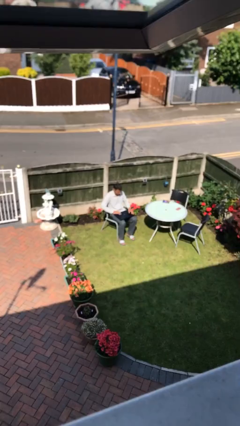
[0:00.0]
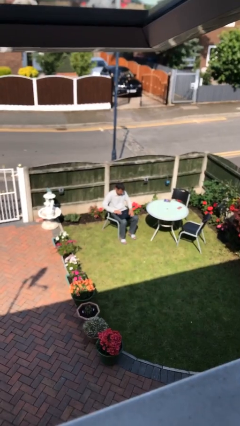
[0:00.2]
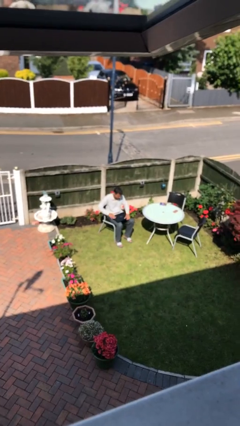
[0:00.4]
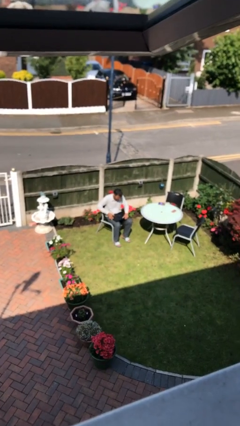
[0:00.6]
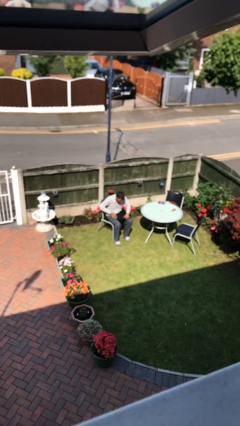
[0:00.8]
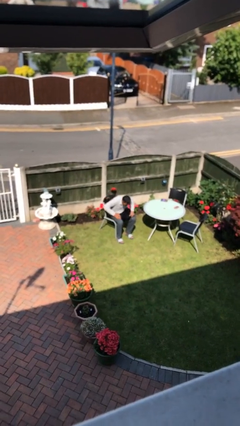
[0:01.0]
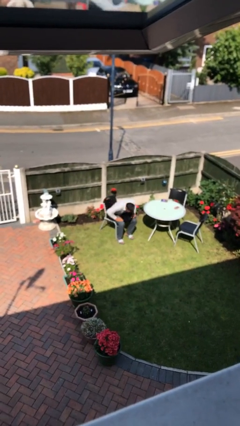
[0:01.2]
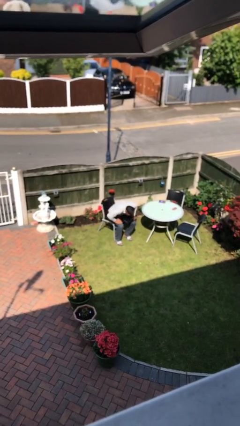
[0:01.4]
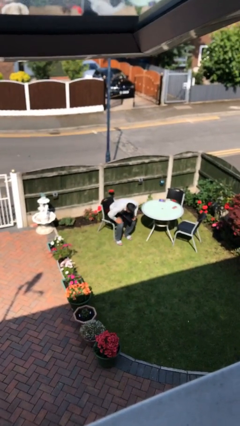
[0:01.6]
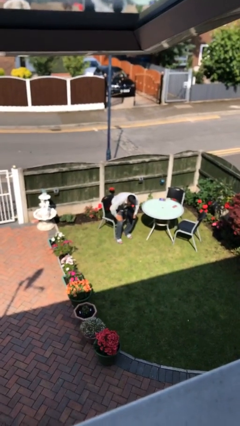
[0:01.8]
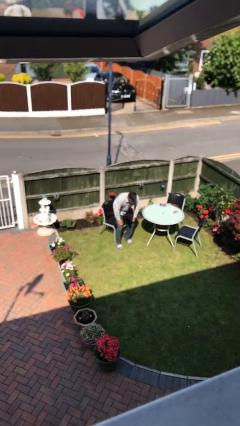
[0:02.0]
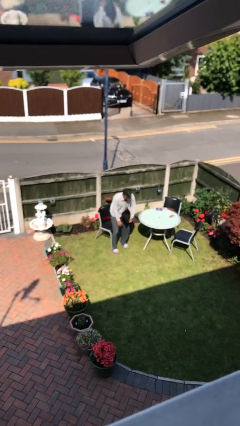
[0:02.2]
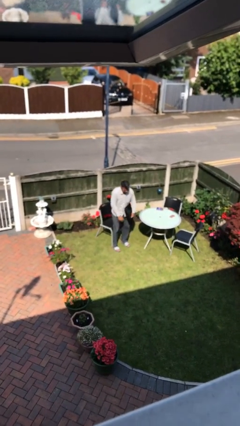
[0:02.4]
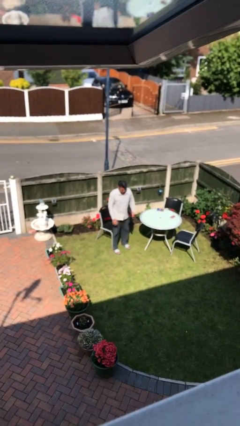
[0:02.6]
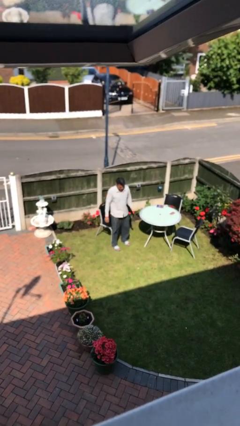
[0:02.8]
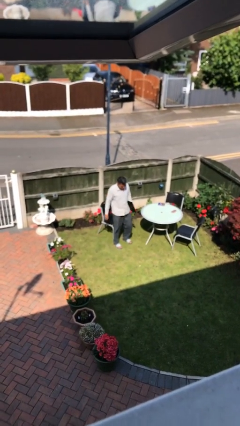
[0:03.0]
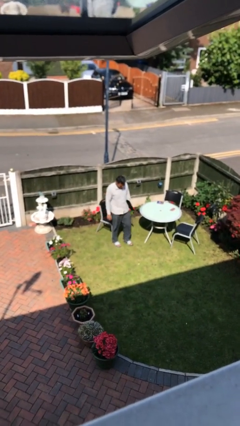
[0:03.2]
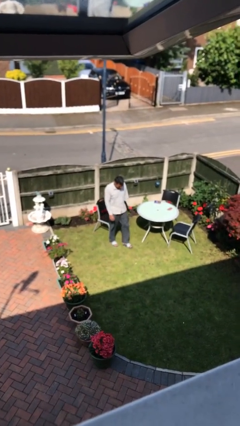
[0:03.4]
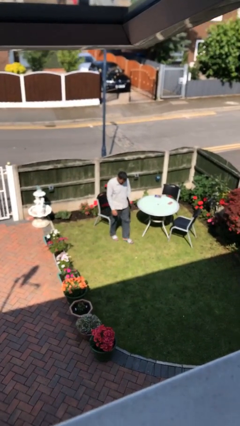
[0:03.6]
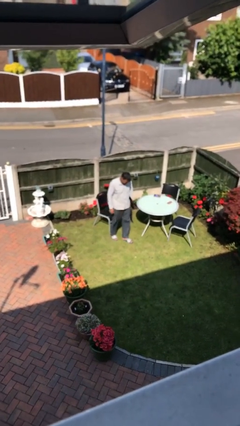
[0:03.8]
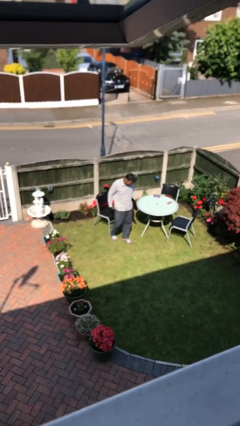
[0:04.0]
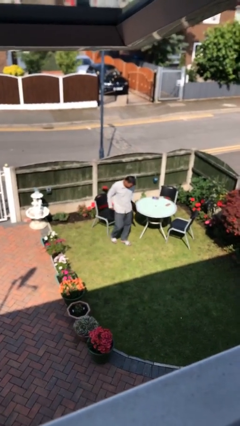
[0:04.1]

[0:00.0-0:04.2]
person stands up

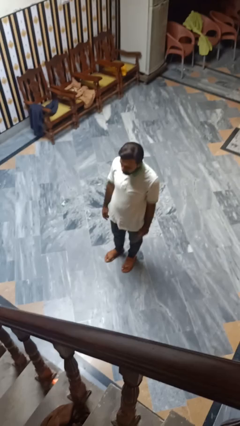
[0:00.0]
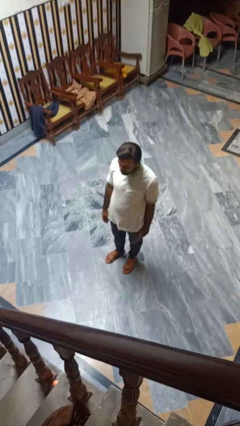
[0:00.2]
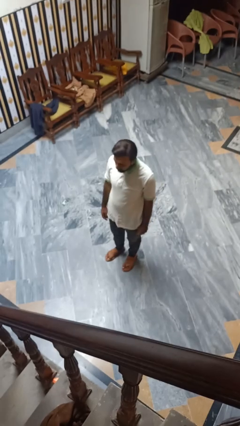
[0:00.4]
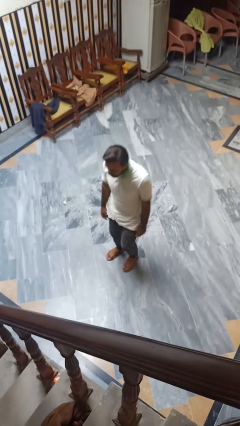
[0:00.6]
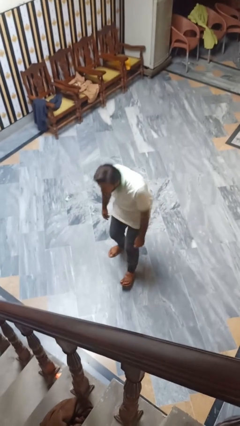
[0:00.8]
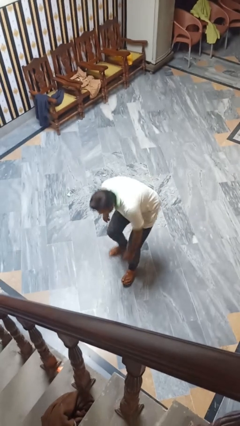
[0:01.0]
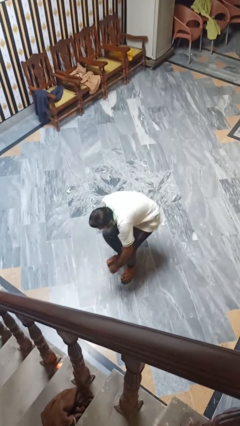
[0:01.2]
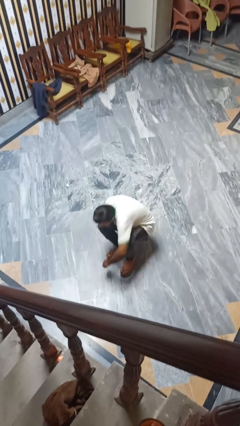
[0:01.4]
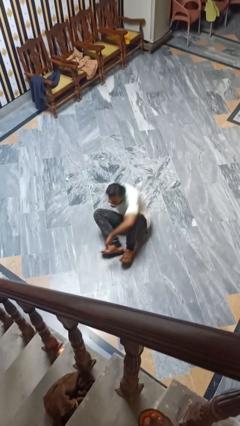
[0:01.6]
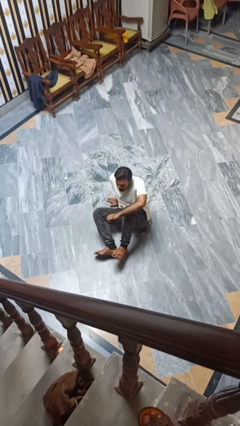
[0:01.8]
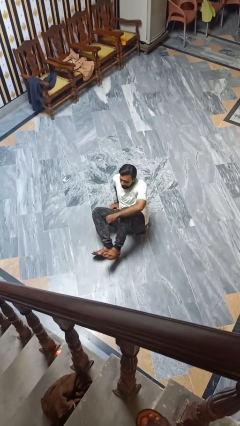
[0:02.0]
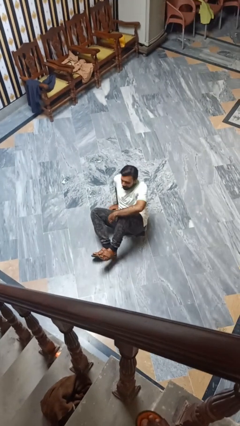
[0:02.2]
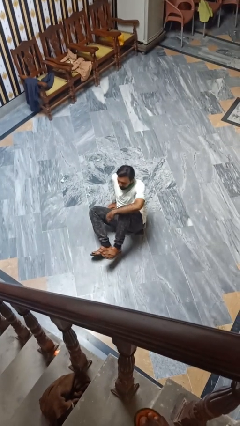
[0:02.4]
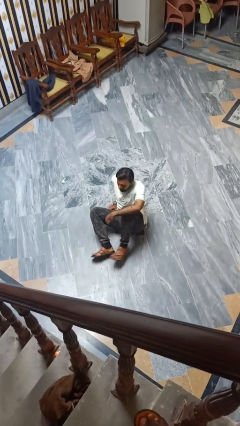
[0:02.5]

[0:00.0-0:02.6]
person falls while standing

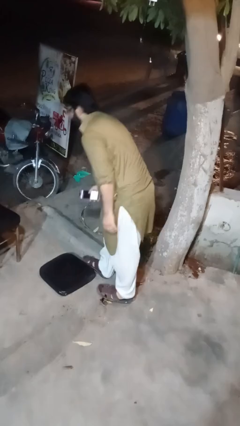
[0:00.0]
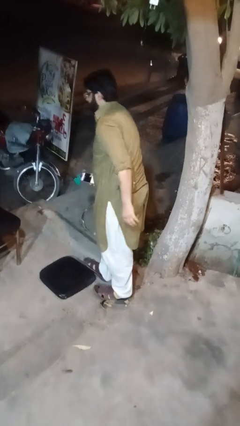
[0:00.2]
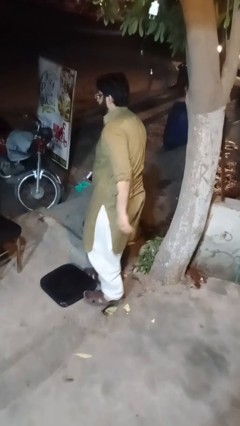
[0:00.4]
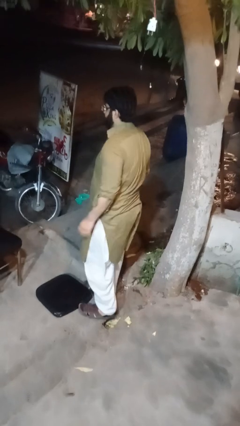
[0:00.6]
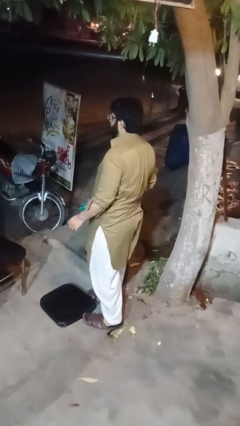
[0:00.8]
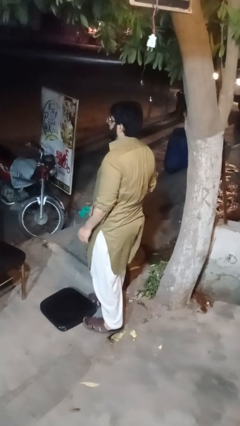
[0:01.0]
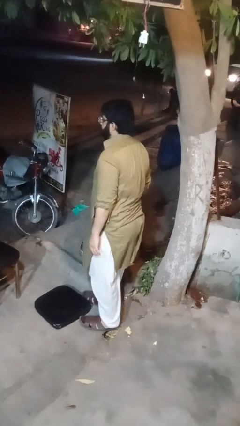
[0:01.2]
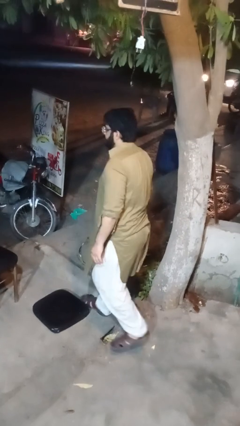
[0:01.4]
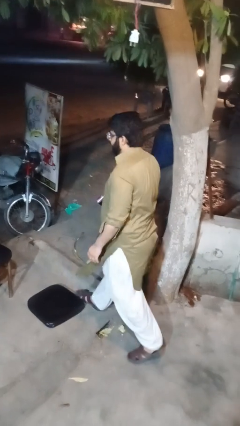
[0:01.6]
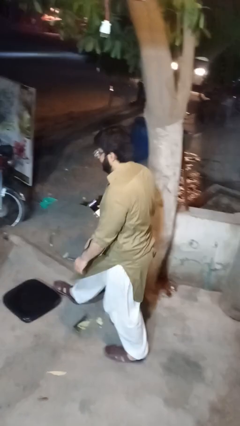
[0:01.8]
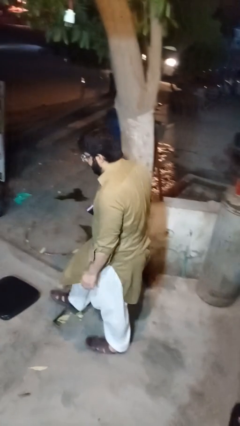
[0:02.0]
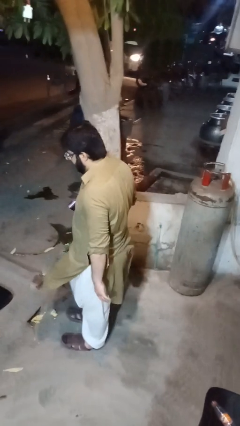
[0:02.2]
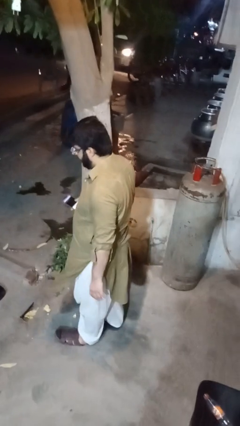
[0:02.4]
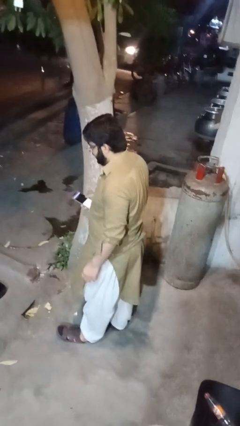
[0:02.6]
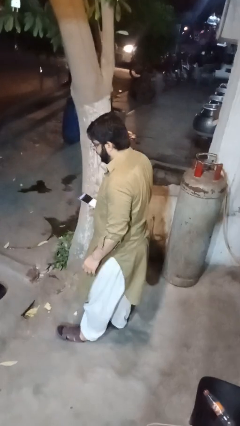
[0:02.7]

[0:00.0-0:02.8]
person stands up from floor

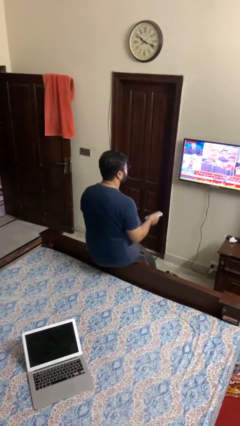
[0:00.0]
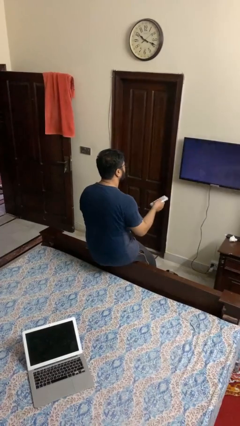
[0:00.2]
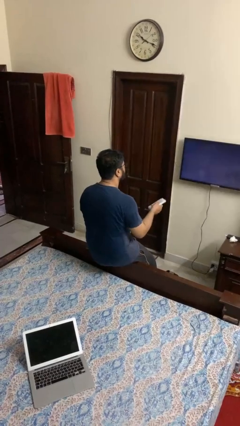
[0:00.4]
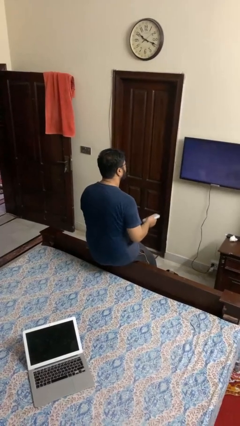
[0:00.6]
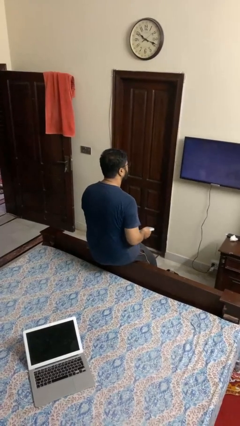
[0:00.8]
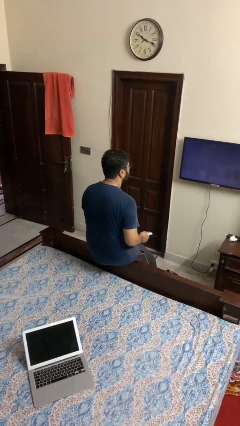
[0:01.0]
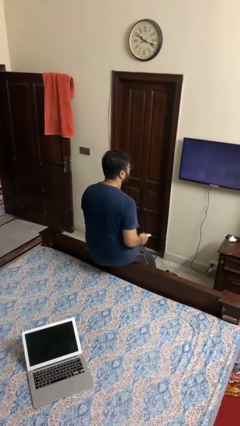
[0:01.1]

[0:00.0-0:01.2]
person uses television remote

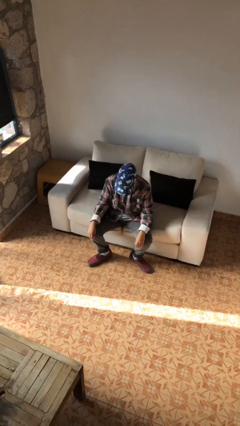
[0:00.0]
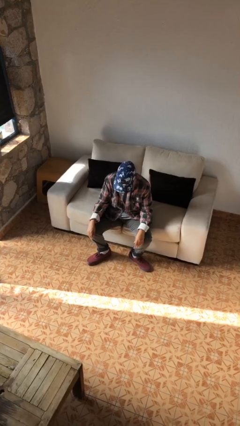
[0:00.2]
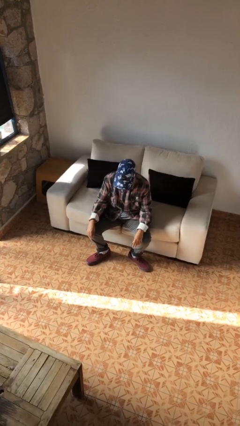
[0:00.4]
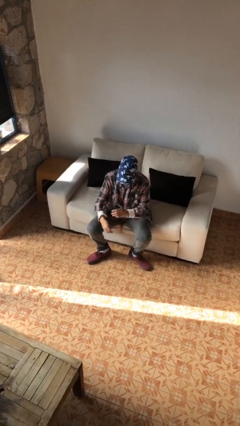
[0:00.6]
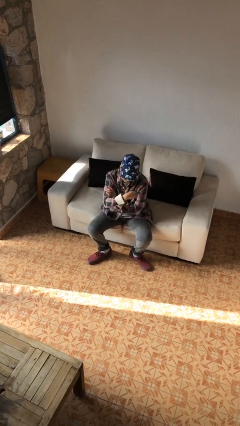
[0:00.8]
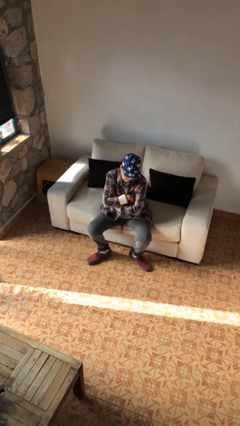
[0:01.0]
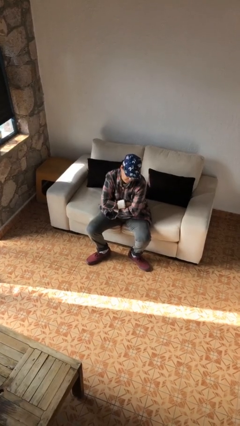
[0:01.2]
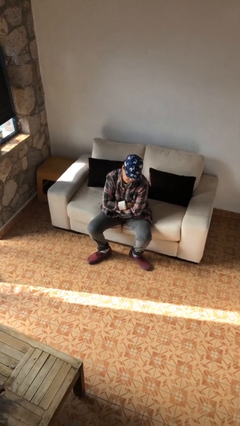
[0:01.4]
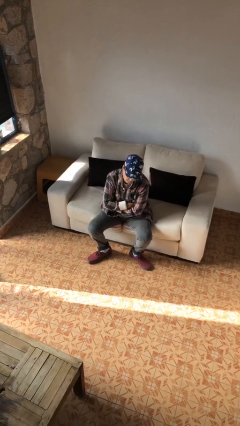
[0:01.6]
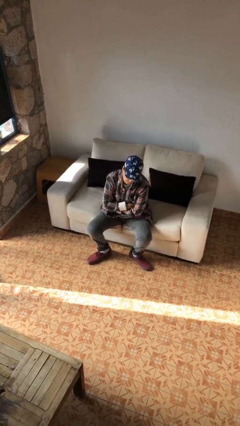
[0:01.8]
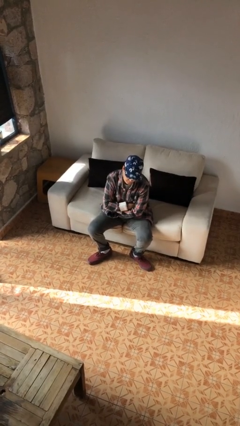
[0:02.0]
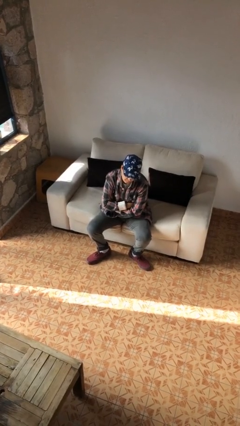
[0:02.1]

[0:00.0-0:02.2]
person crosses arms

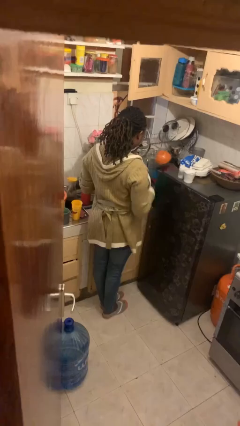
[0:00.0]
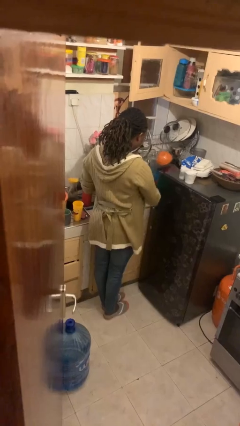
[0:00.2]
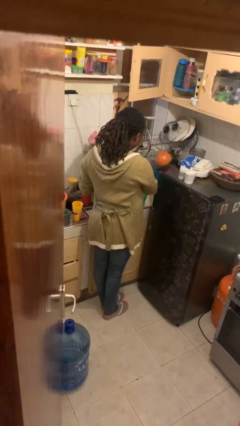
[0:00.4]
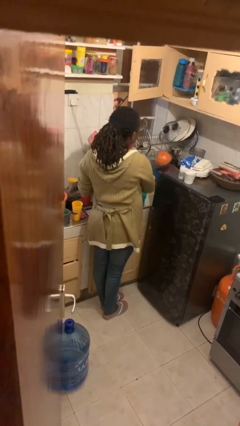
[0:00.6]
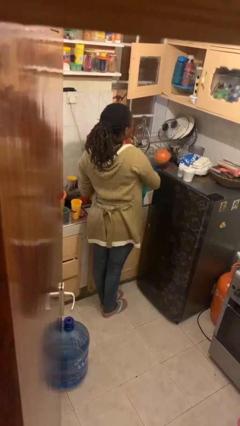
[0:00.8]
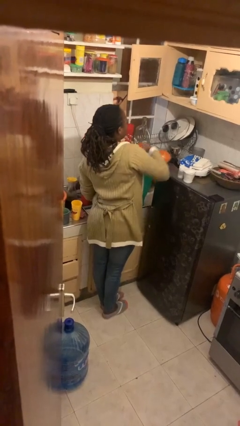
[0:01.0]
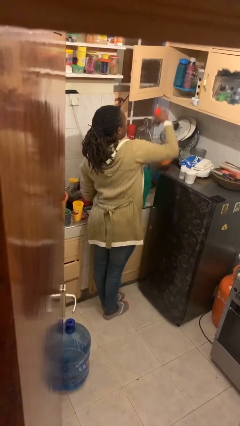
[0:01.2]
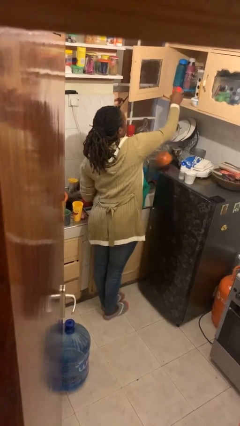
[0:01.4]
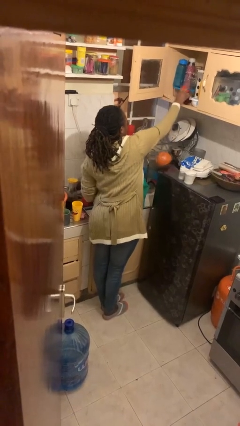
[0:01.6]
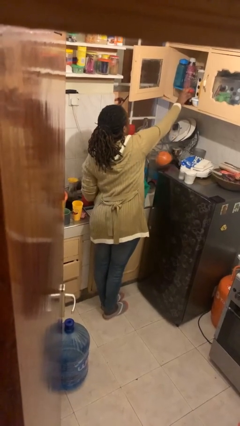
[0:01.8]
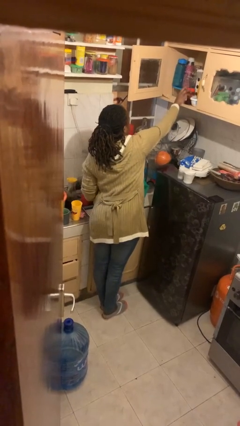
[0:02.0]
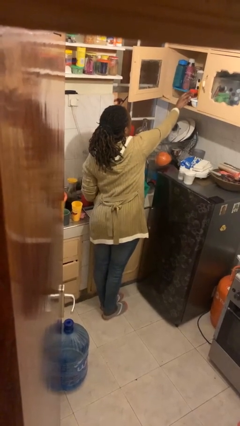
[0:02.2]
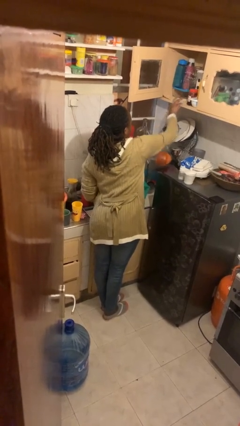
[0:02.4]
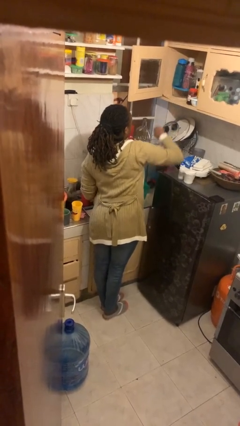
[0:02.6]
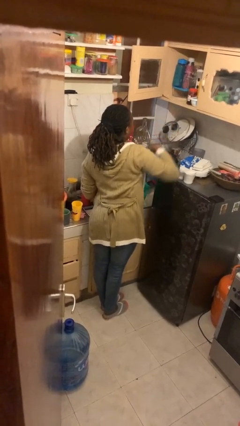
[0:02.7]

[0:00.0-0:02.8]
person loads groceries into cabinet

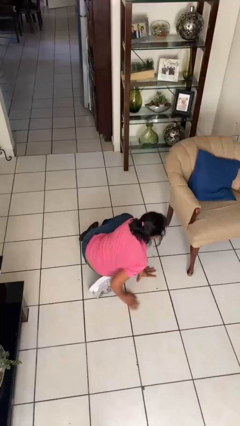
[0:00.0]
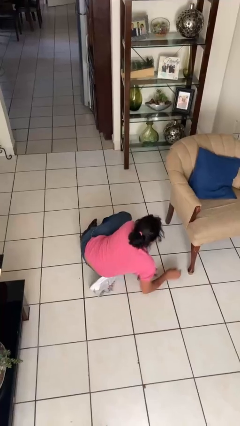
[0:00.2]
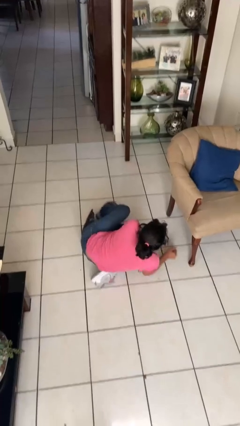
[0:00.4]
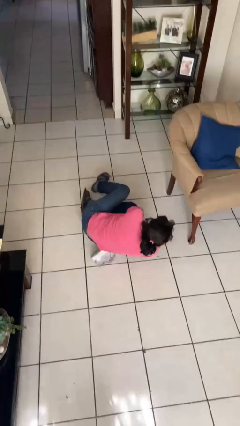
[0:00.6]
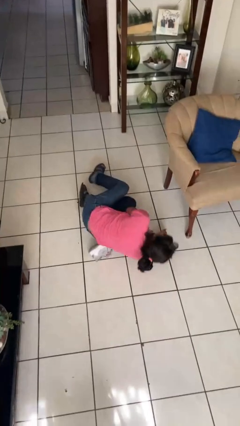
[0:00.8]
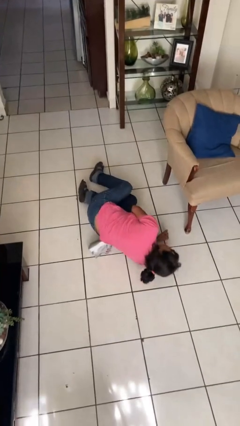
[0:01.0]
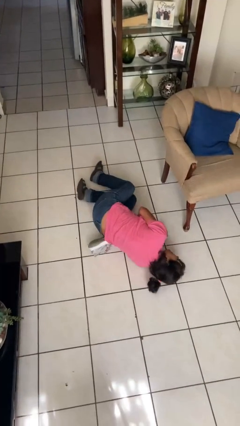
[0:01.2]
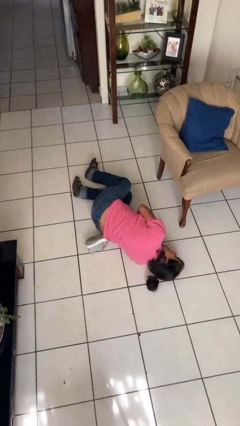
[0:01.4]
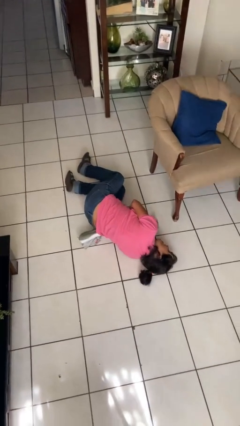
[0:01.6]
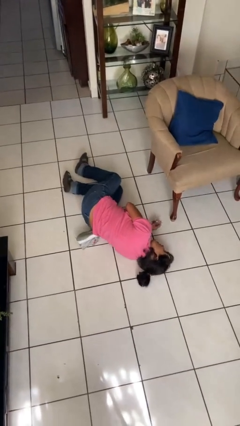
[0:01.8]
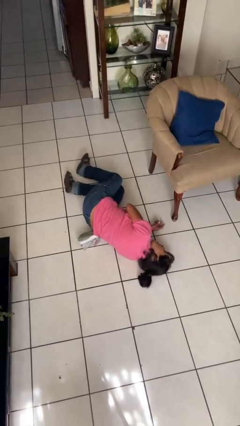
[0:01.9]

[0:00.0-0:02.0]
person lies down on floor
